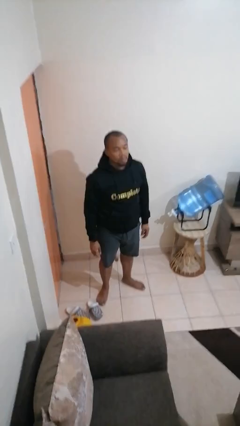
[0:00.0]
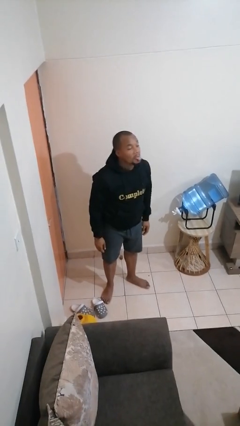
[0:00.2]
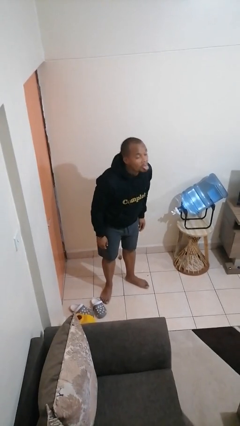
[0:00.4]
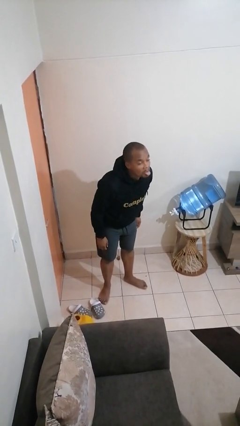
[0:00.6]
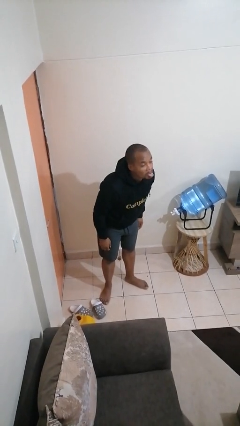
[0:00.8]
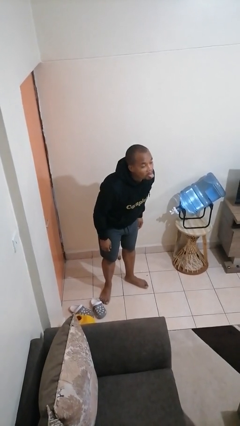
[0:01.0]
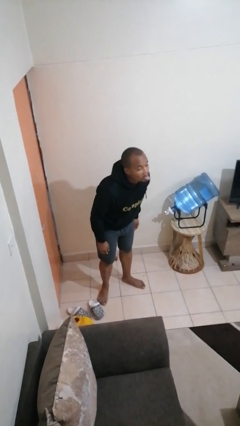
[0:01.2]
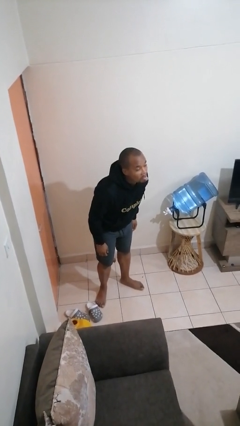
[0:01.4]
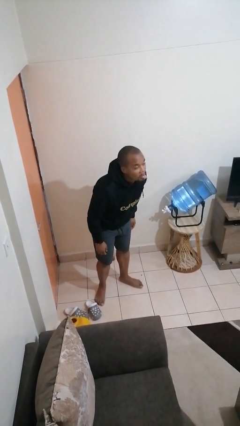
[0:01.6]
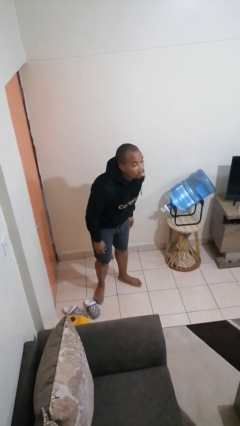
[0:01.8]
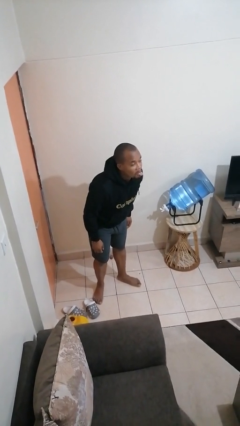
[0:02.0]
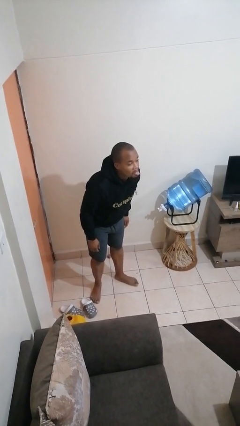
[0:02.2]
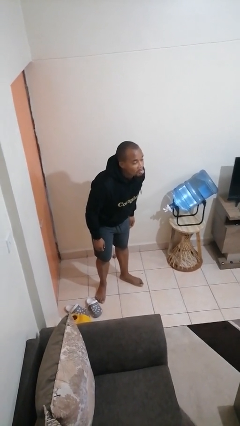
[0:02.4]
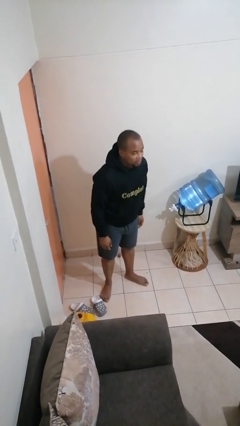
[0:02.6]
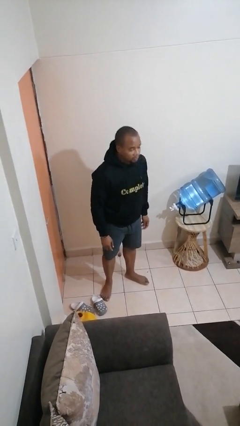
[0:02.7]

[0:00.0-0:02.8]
person sticks out tongue

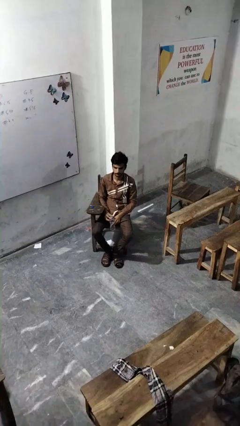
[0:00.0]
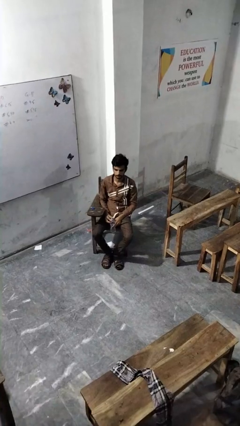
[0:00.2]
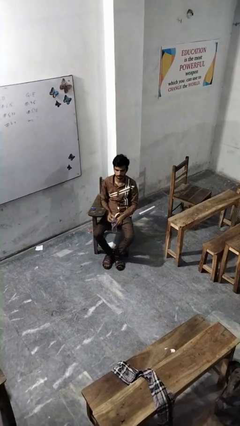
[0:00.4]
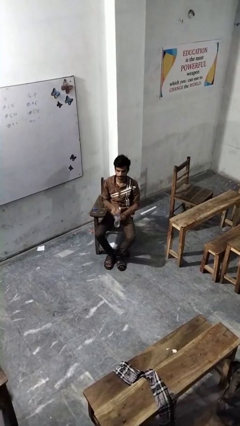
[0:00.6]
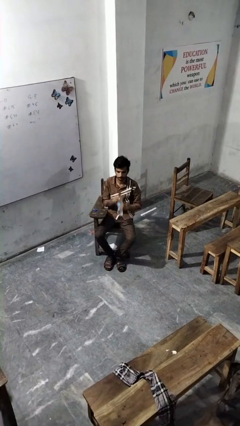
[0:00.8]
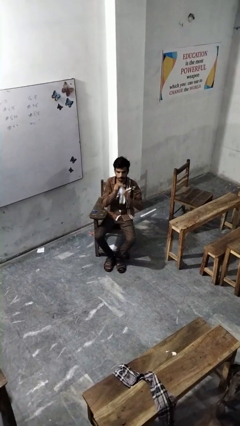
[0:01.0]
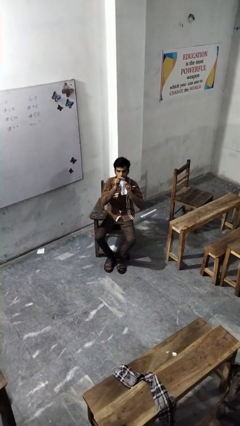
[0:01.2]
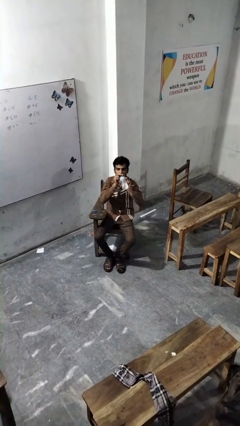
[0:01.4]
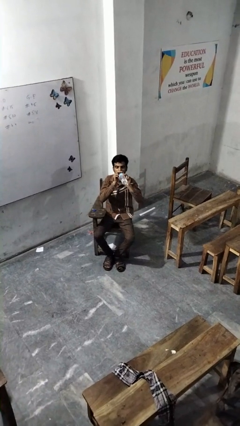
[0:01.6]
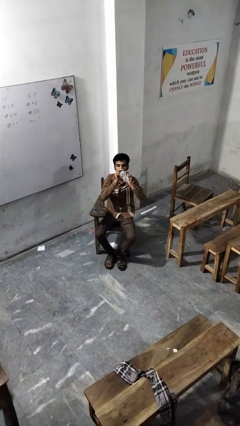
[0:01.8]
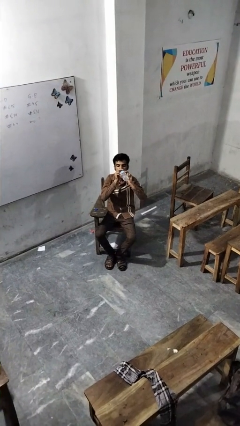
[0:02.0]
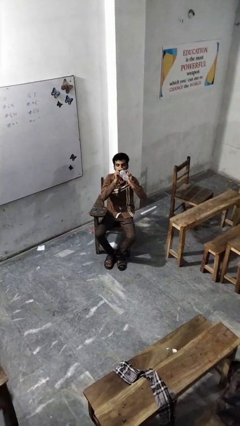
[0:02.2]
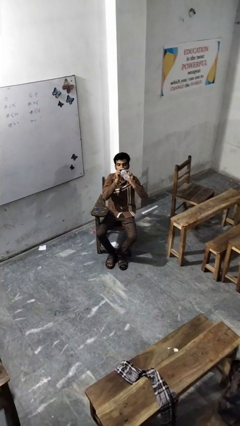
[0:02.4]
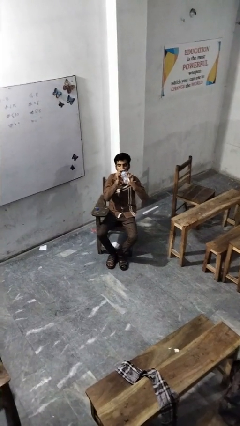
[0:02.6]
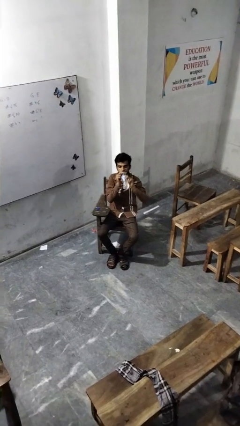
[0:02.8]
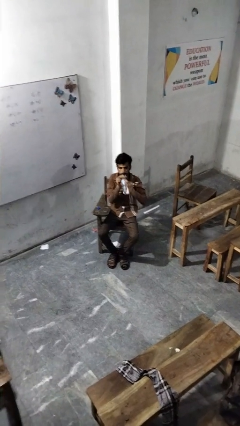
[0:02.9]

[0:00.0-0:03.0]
person drinks from bottle

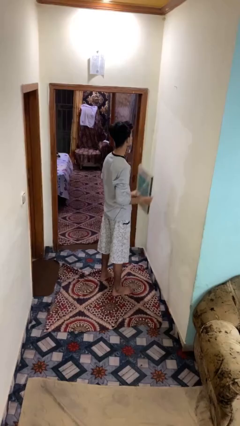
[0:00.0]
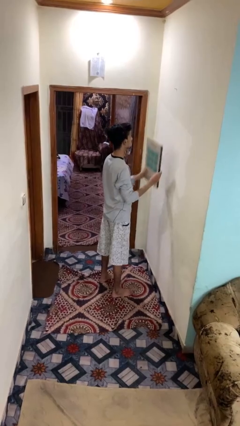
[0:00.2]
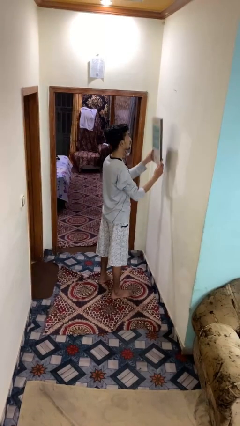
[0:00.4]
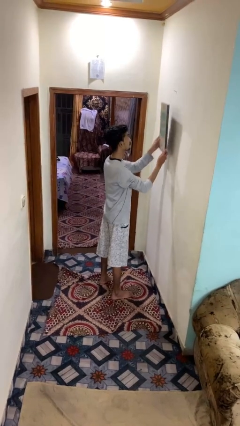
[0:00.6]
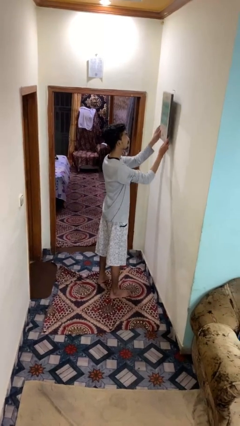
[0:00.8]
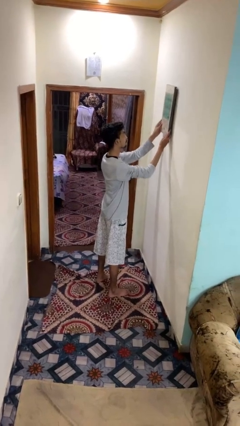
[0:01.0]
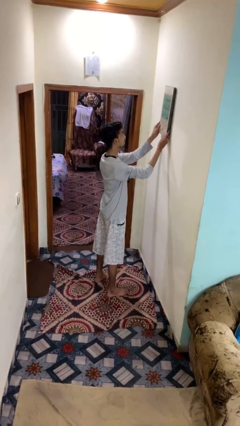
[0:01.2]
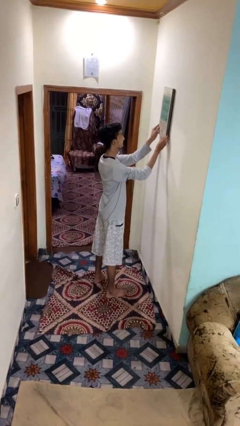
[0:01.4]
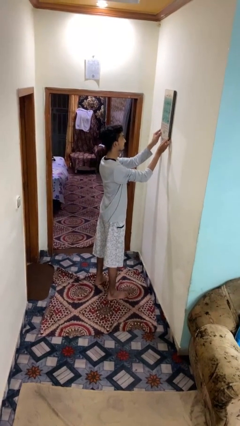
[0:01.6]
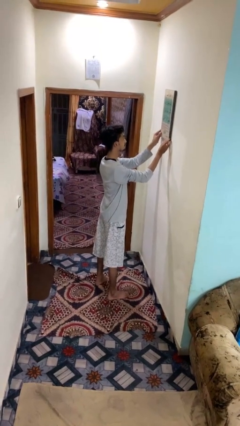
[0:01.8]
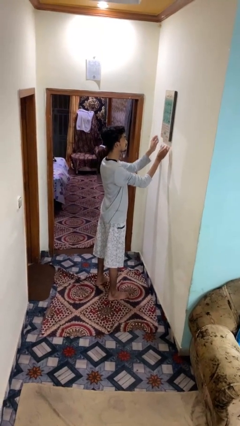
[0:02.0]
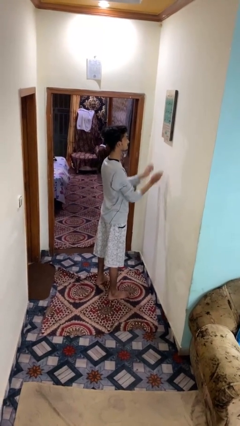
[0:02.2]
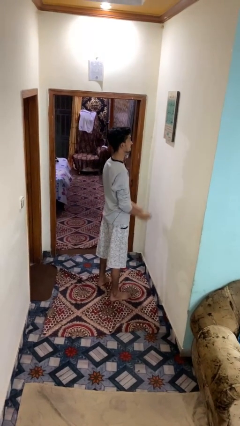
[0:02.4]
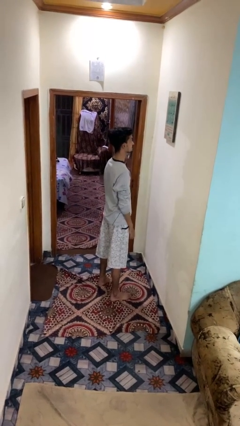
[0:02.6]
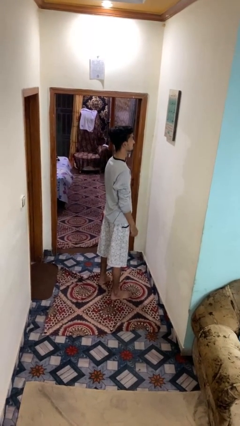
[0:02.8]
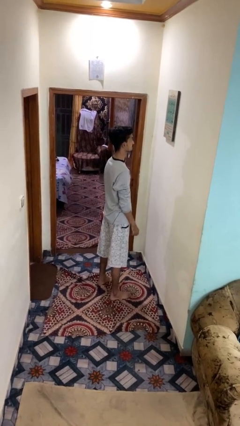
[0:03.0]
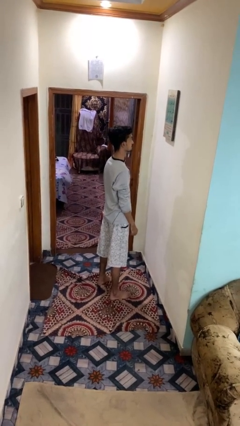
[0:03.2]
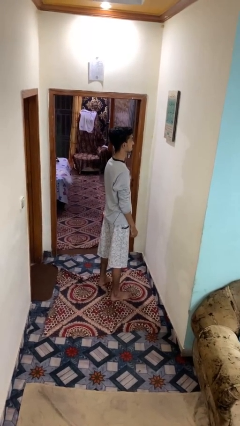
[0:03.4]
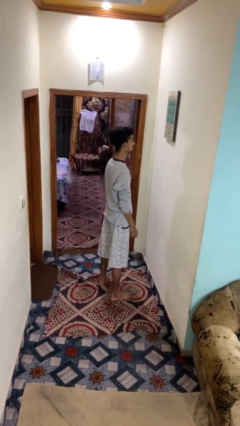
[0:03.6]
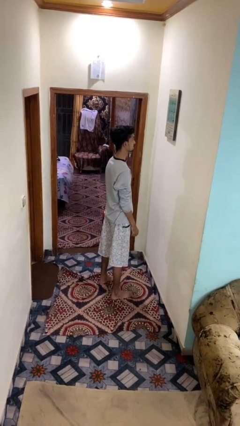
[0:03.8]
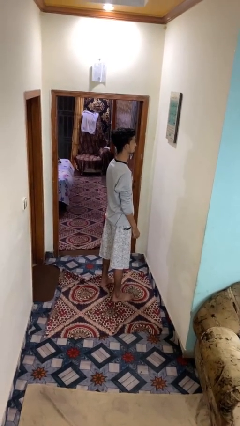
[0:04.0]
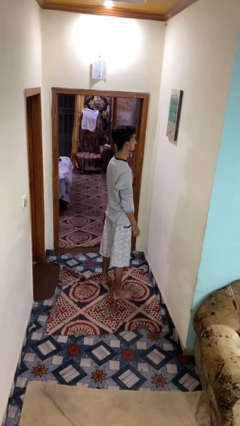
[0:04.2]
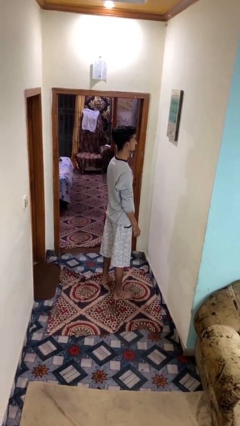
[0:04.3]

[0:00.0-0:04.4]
person puts up picture frame

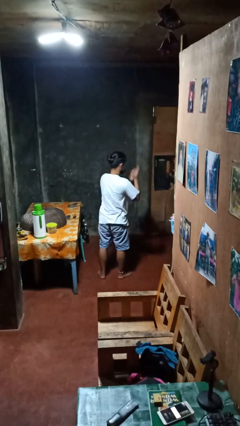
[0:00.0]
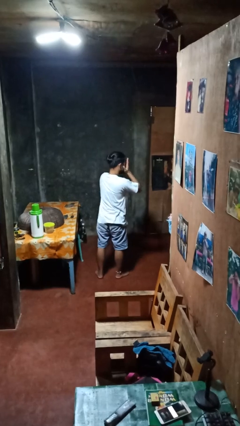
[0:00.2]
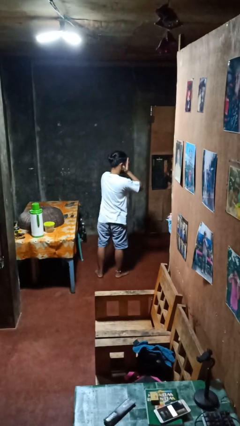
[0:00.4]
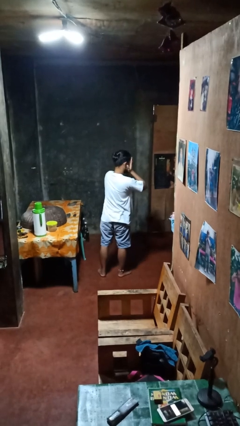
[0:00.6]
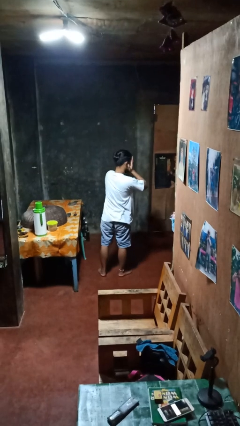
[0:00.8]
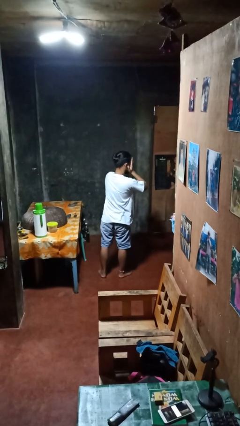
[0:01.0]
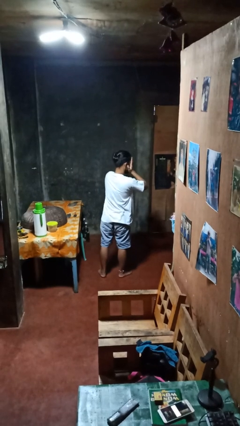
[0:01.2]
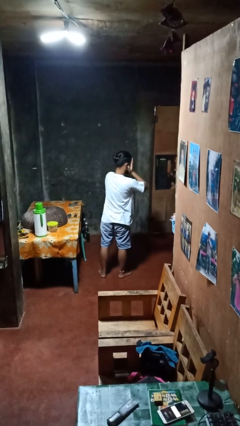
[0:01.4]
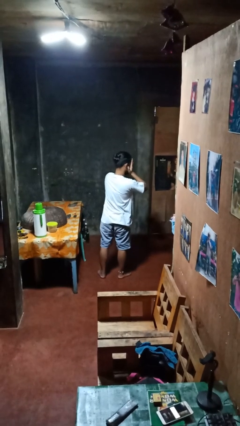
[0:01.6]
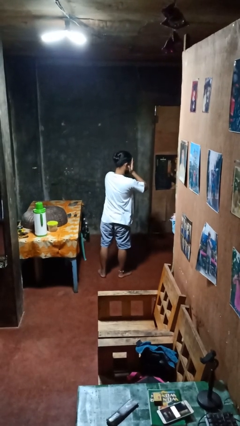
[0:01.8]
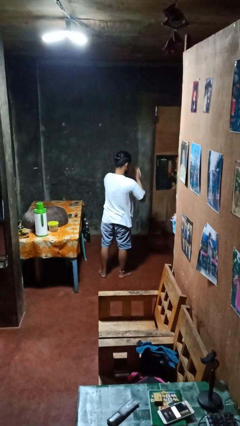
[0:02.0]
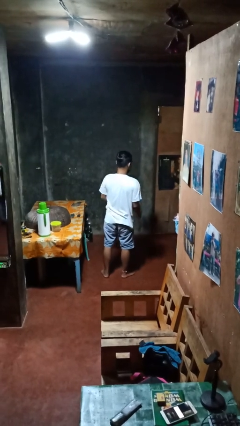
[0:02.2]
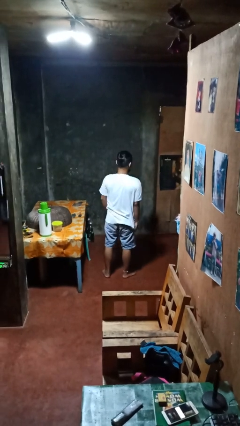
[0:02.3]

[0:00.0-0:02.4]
person covers face with hands

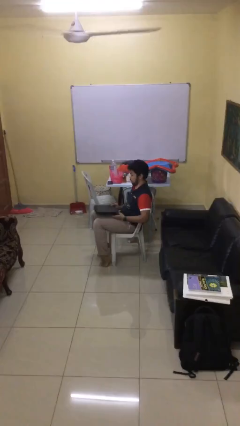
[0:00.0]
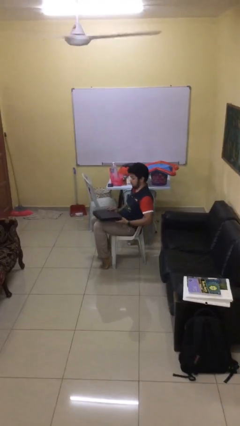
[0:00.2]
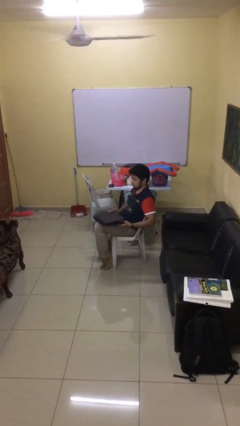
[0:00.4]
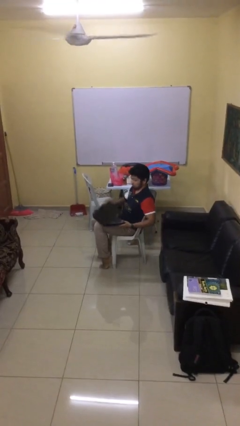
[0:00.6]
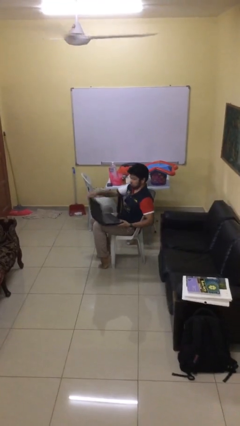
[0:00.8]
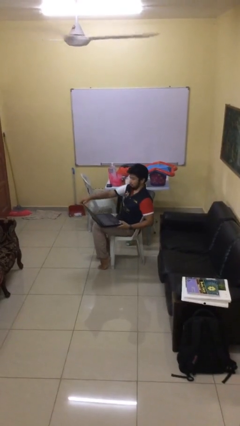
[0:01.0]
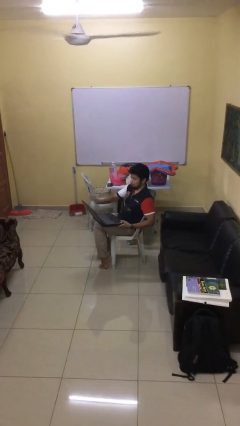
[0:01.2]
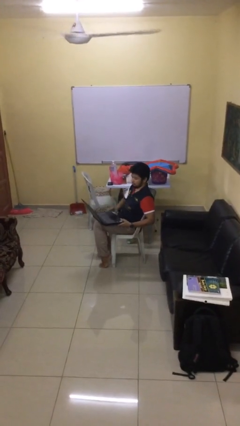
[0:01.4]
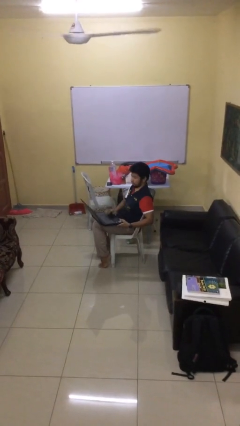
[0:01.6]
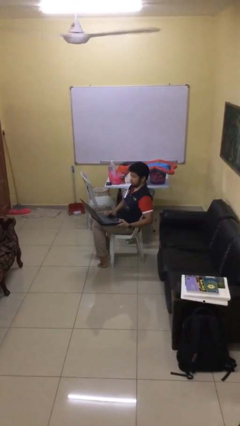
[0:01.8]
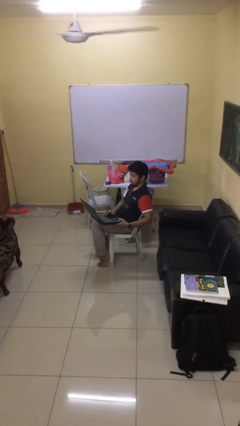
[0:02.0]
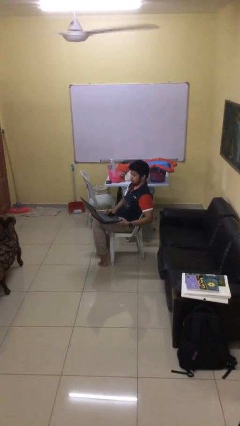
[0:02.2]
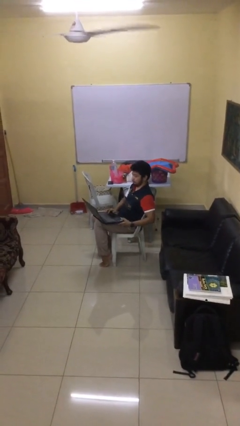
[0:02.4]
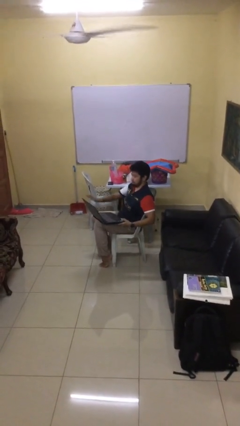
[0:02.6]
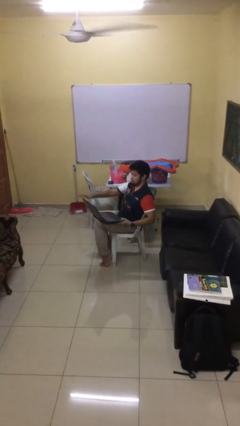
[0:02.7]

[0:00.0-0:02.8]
person opens laptop

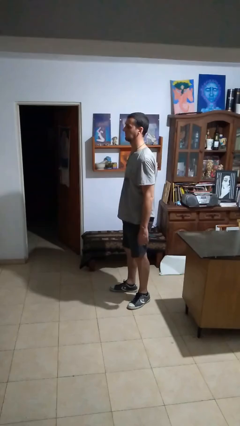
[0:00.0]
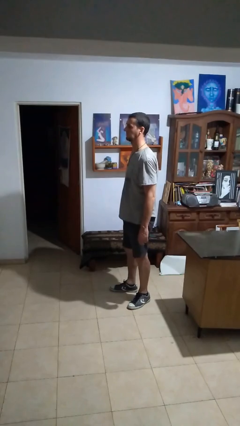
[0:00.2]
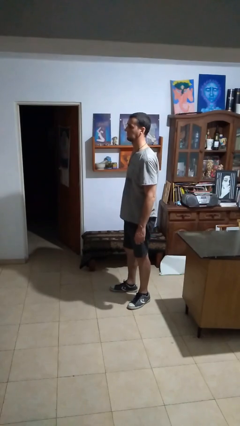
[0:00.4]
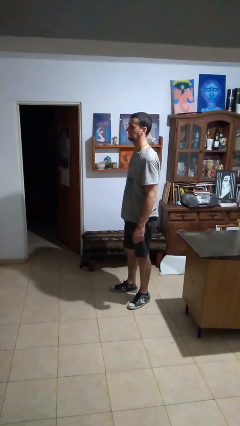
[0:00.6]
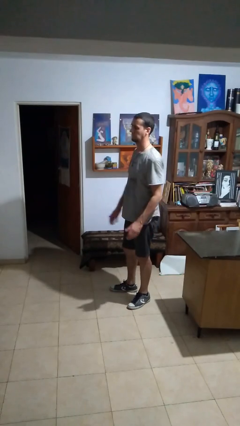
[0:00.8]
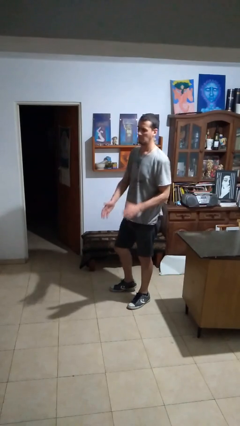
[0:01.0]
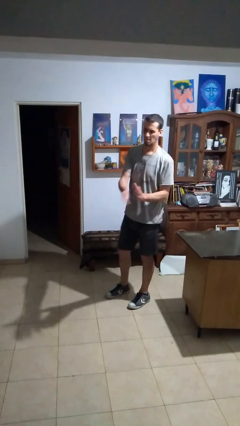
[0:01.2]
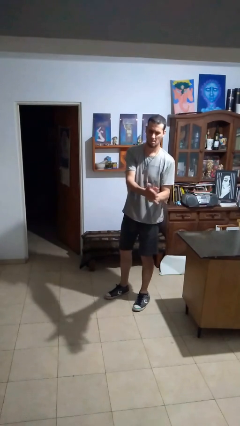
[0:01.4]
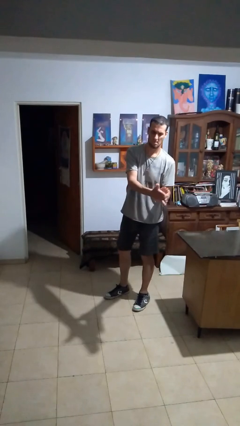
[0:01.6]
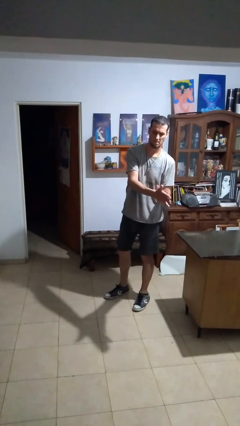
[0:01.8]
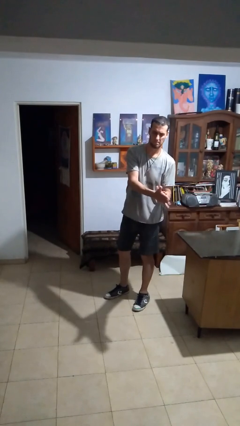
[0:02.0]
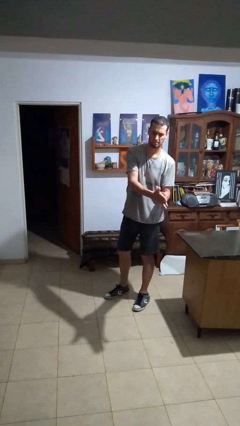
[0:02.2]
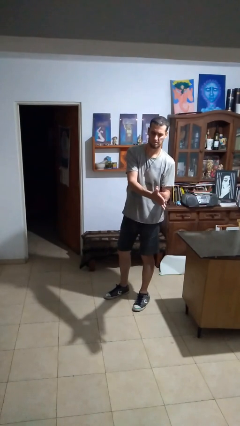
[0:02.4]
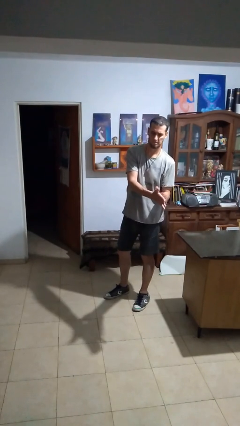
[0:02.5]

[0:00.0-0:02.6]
person claps hands
